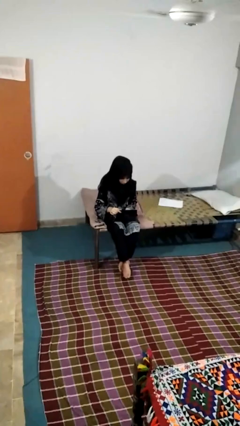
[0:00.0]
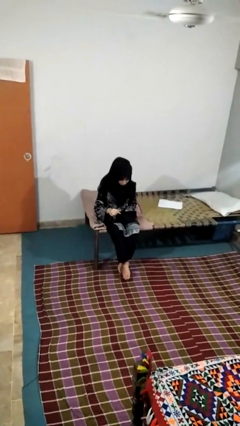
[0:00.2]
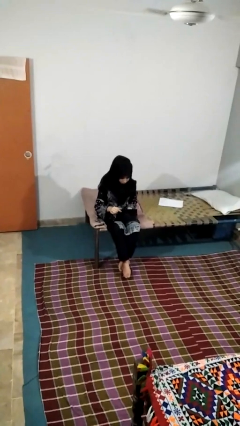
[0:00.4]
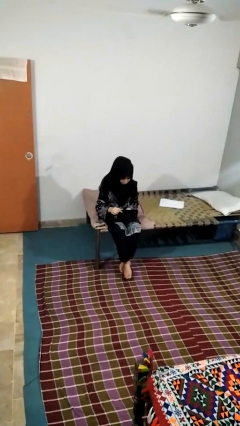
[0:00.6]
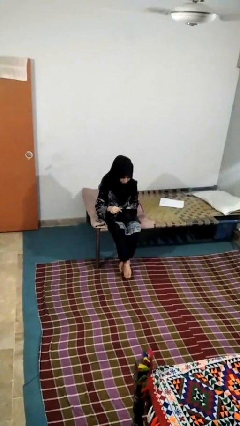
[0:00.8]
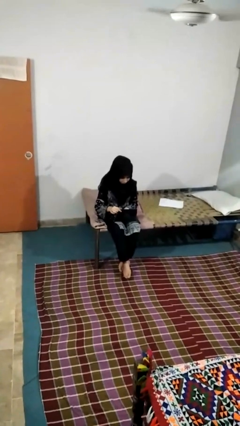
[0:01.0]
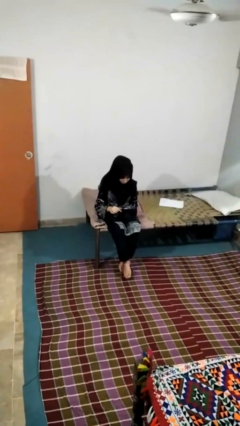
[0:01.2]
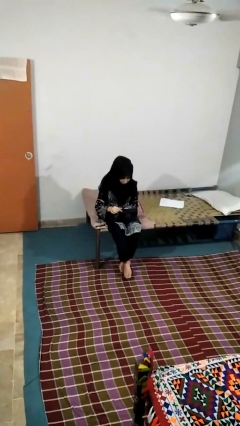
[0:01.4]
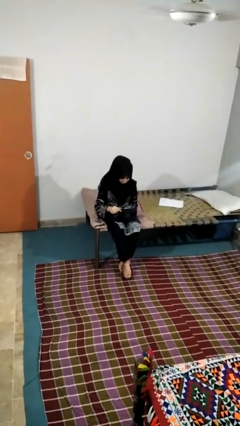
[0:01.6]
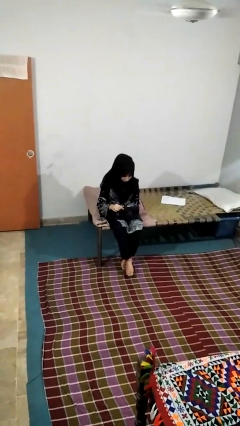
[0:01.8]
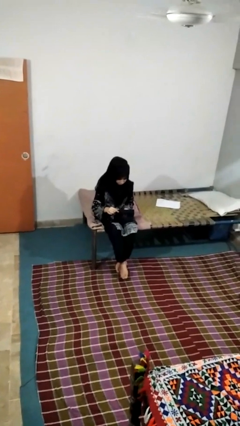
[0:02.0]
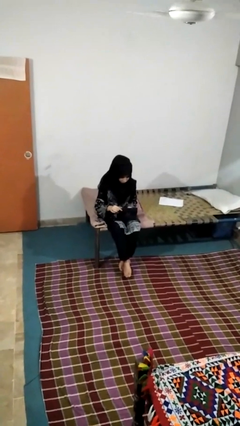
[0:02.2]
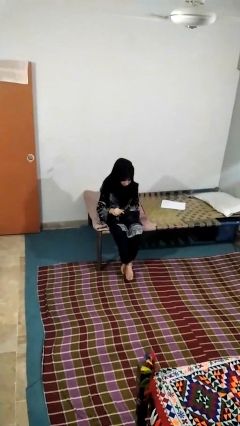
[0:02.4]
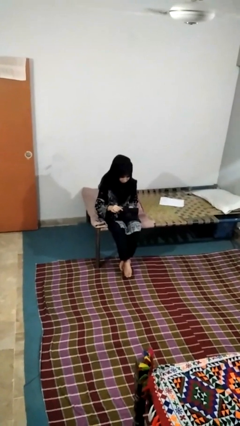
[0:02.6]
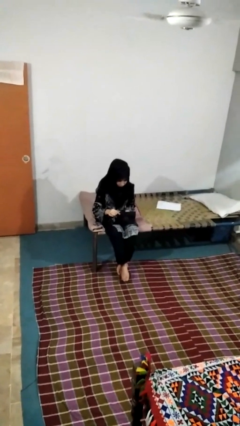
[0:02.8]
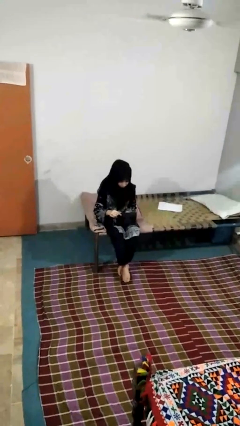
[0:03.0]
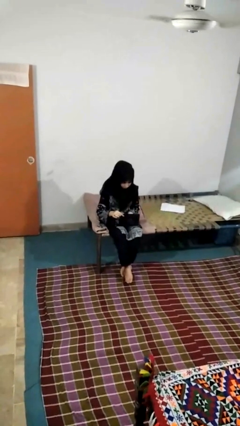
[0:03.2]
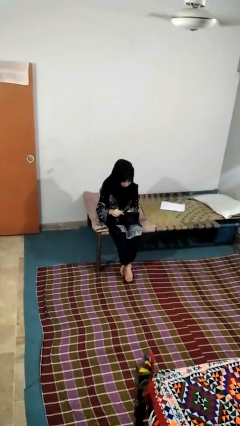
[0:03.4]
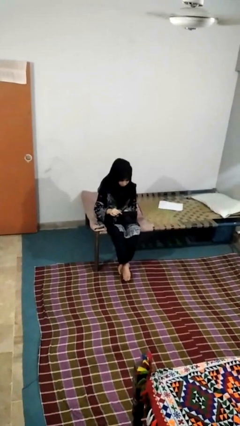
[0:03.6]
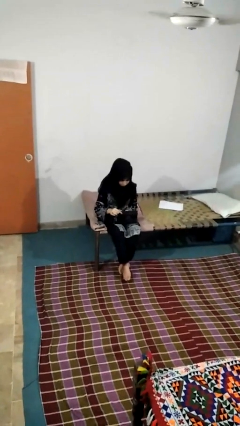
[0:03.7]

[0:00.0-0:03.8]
person searches jewelry box

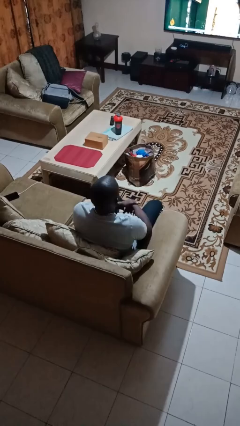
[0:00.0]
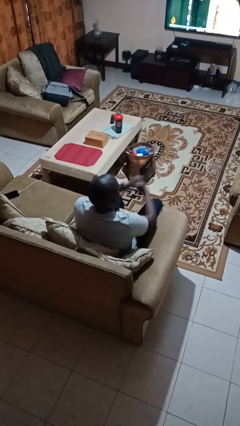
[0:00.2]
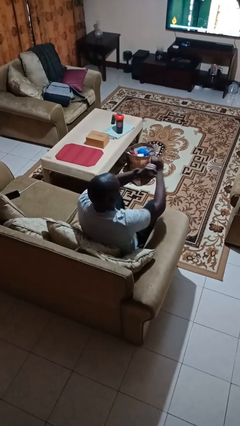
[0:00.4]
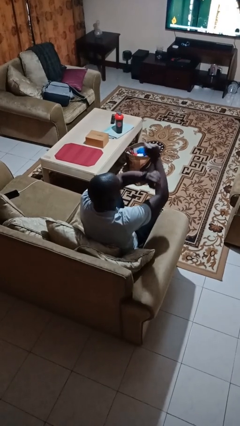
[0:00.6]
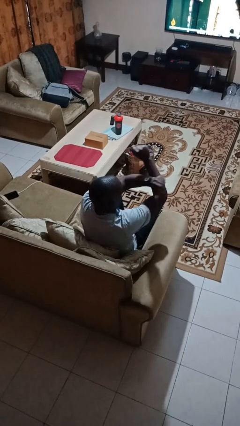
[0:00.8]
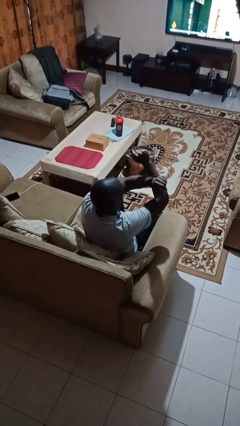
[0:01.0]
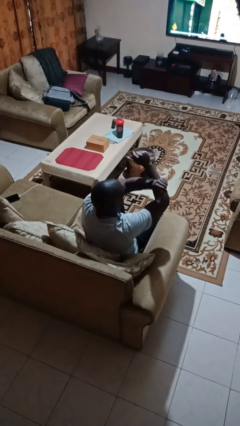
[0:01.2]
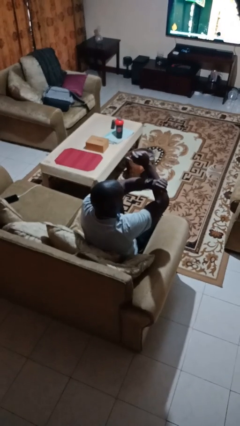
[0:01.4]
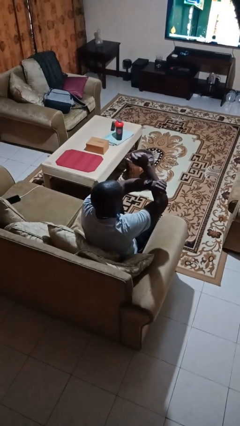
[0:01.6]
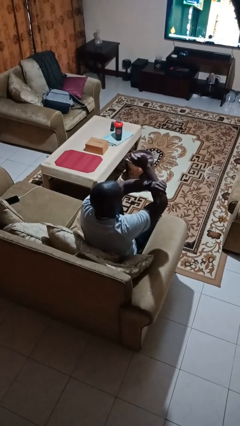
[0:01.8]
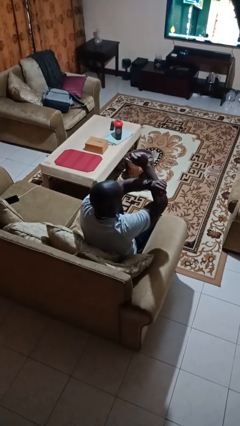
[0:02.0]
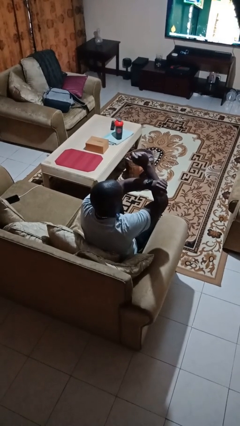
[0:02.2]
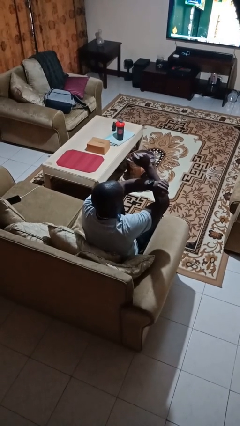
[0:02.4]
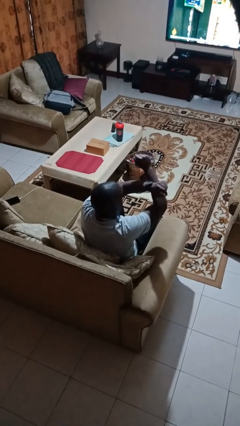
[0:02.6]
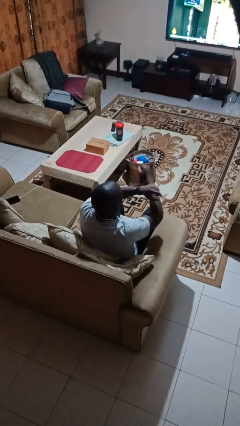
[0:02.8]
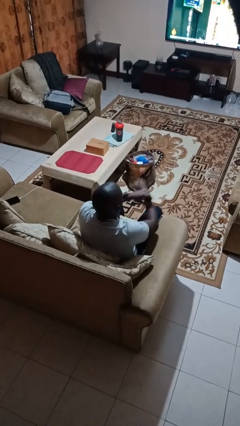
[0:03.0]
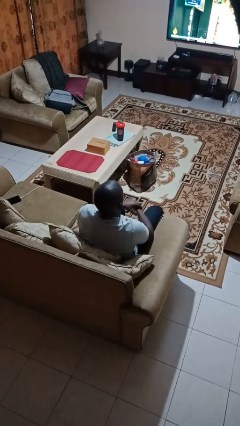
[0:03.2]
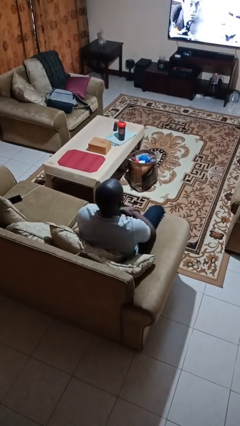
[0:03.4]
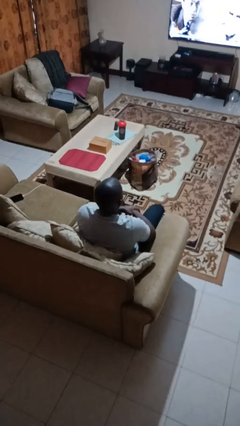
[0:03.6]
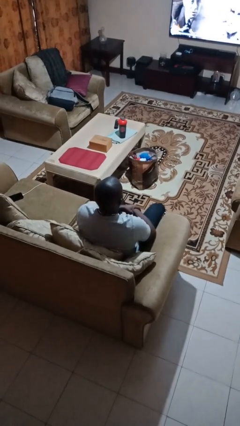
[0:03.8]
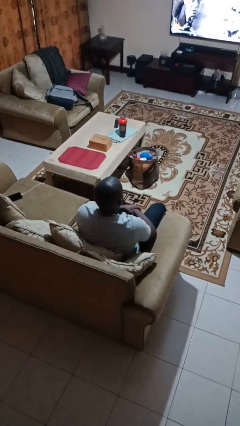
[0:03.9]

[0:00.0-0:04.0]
person gestures arms x

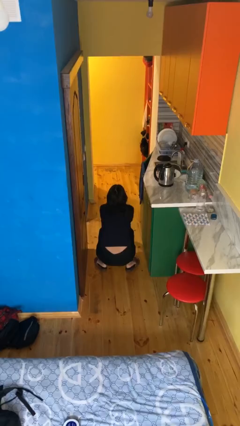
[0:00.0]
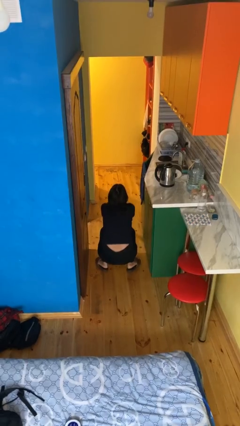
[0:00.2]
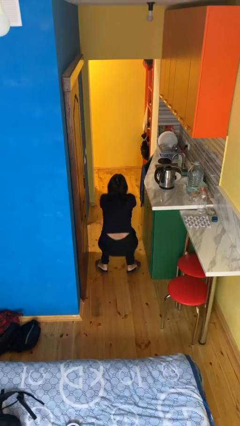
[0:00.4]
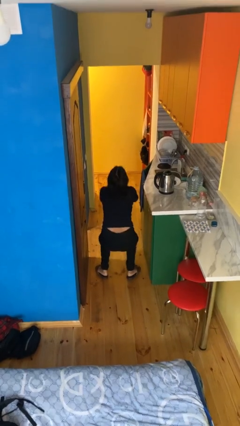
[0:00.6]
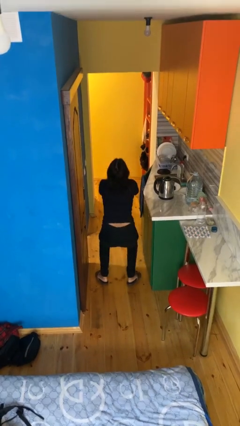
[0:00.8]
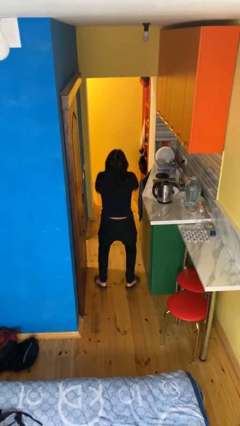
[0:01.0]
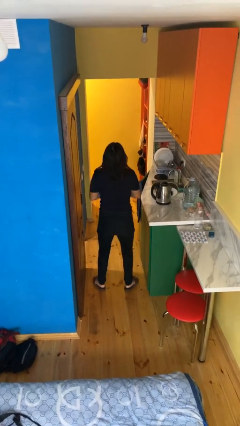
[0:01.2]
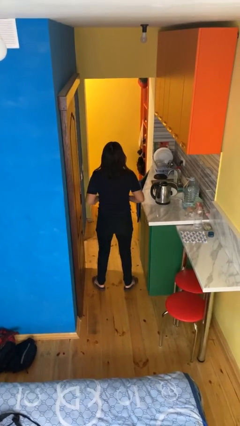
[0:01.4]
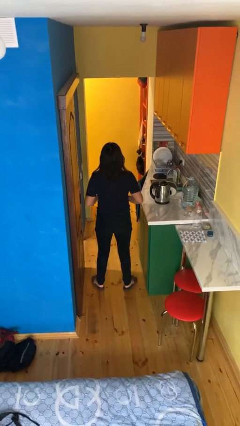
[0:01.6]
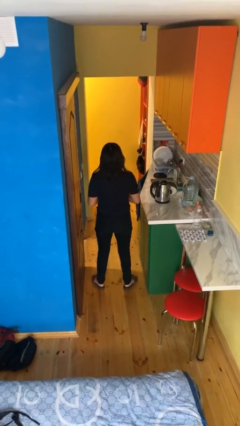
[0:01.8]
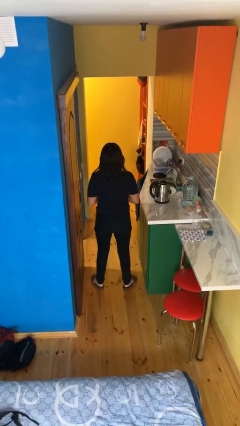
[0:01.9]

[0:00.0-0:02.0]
person stands up

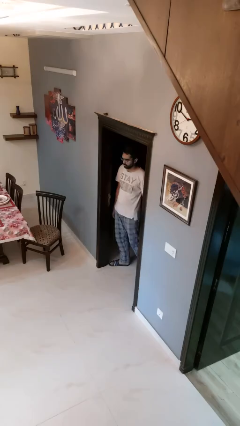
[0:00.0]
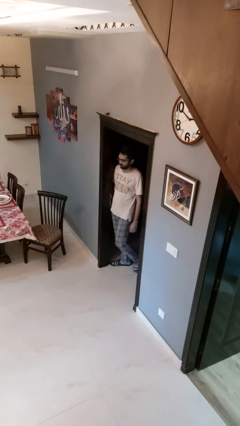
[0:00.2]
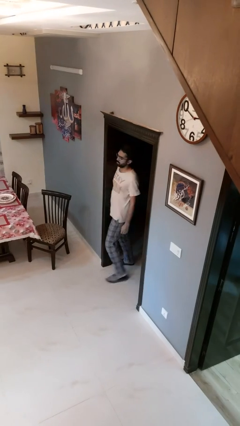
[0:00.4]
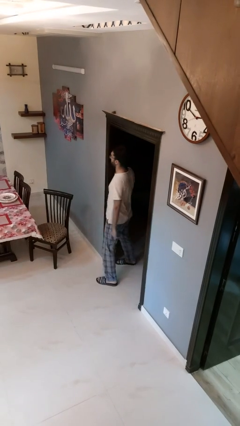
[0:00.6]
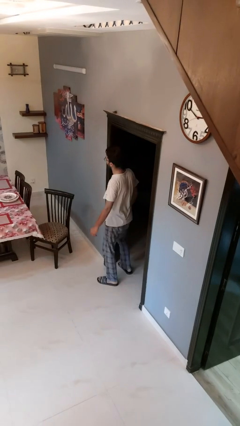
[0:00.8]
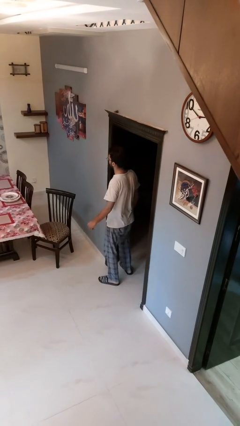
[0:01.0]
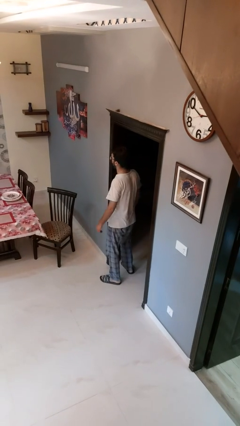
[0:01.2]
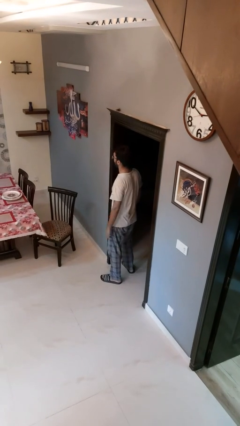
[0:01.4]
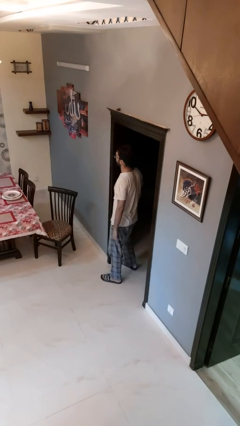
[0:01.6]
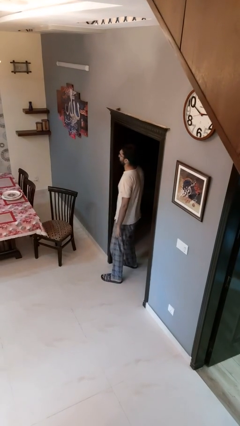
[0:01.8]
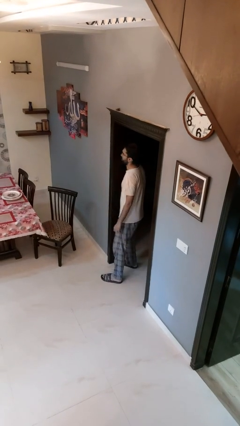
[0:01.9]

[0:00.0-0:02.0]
person bumps into wall

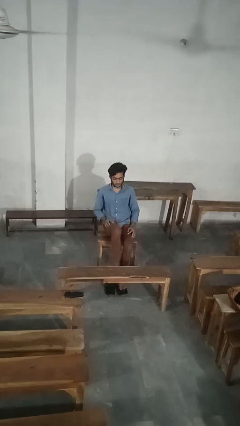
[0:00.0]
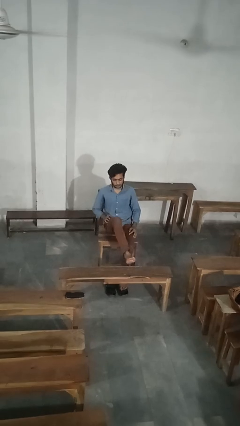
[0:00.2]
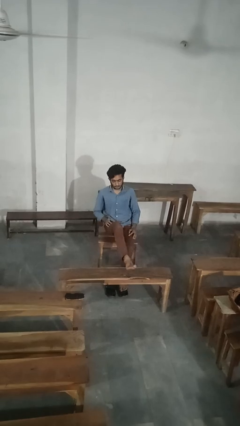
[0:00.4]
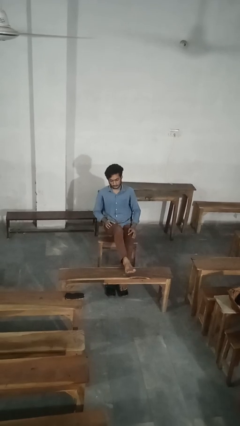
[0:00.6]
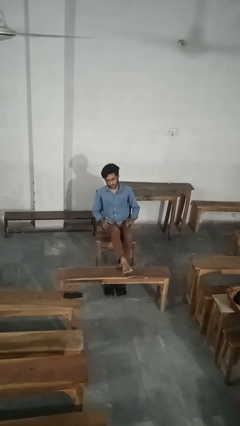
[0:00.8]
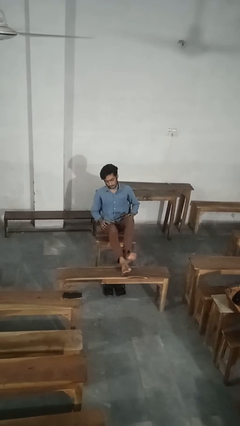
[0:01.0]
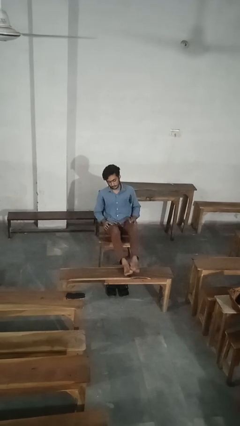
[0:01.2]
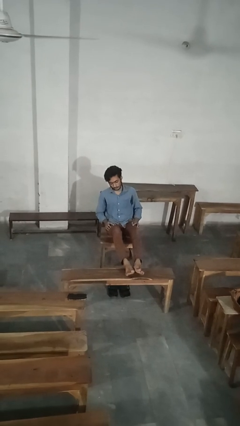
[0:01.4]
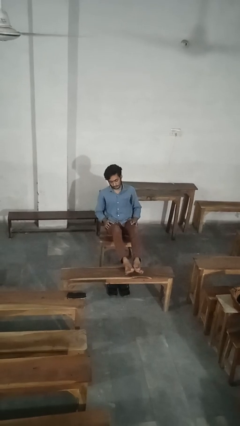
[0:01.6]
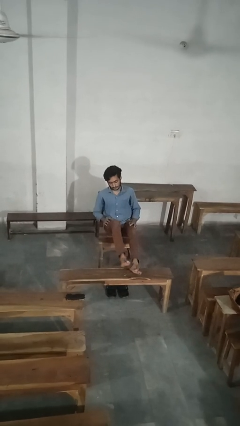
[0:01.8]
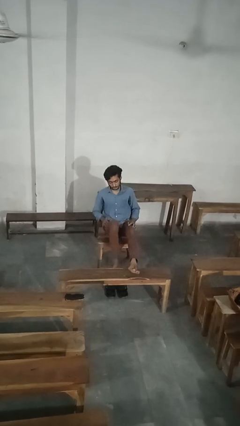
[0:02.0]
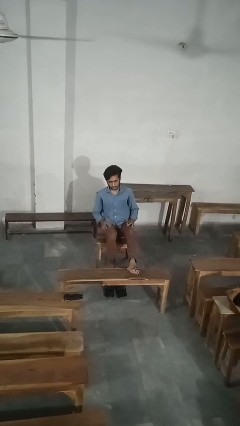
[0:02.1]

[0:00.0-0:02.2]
person puts feet up

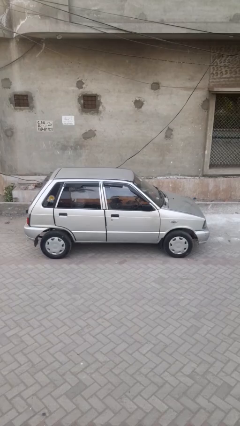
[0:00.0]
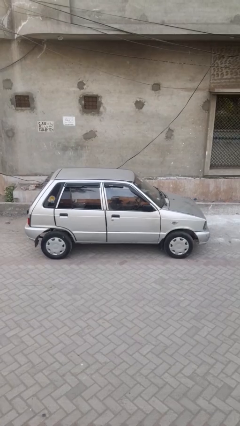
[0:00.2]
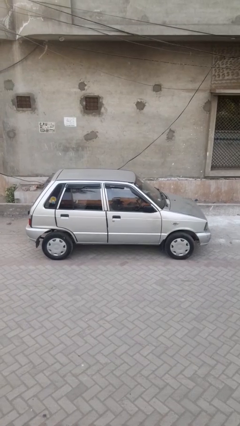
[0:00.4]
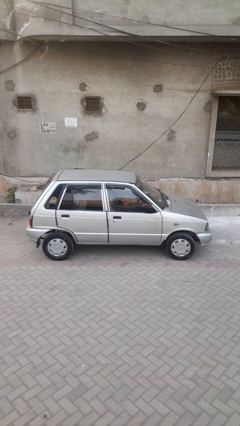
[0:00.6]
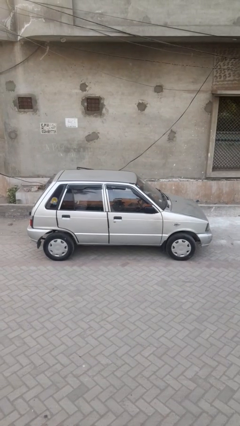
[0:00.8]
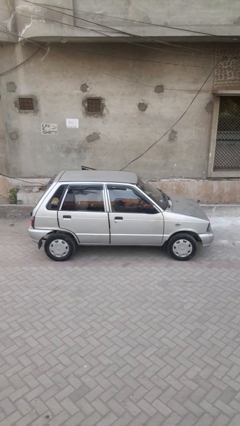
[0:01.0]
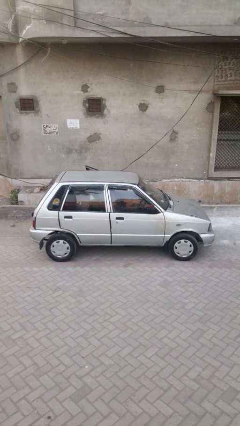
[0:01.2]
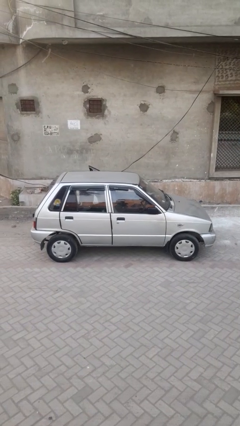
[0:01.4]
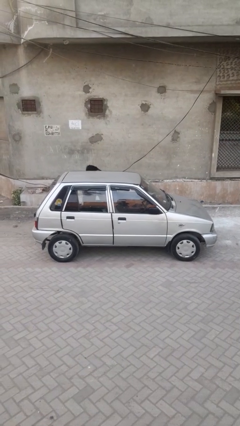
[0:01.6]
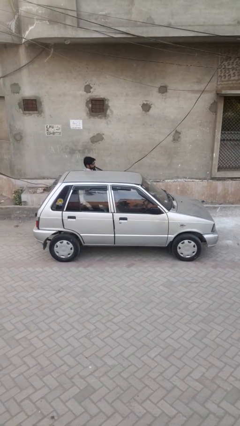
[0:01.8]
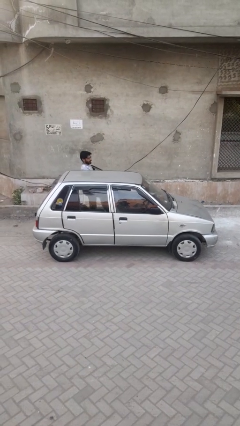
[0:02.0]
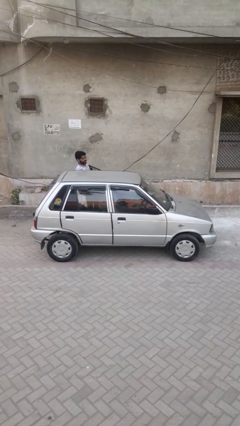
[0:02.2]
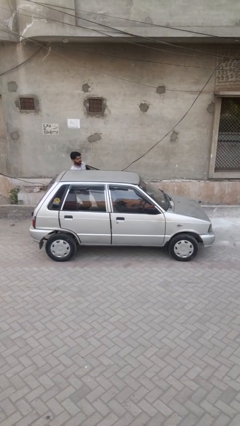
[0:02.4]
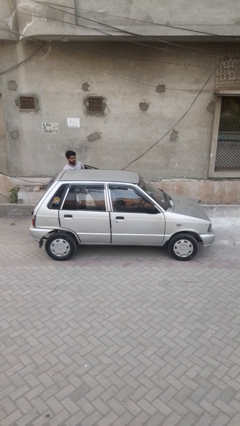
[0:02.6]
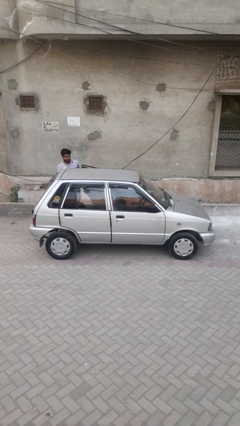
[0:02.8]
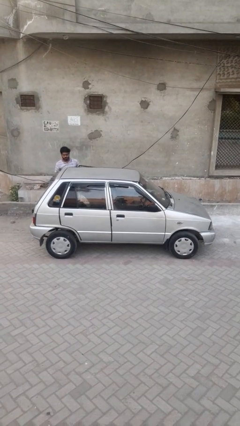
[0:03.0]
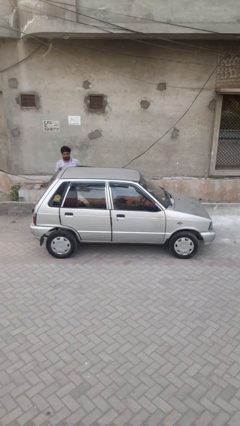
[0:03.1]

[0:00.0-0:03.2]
car drops off person

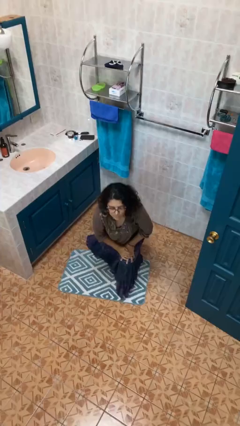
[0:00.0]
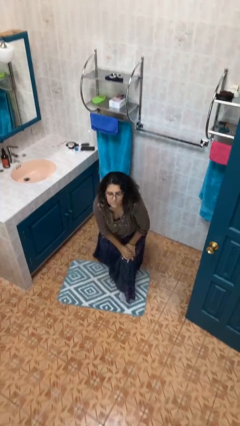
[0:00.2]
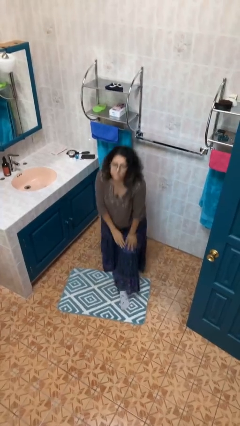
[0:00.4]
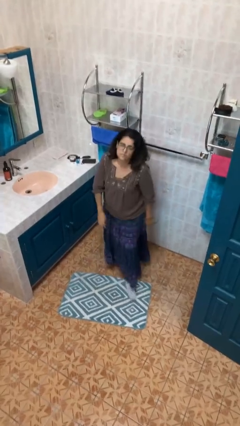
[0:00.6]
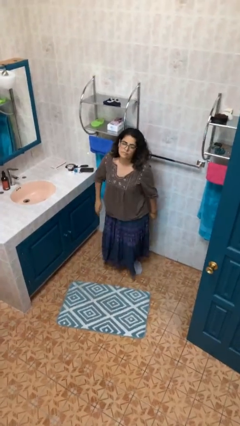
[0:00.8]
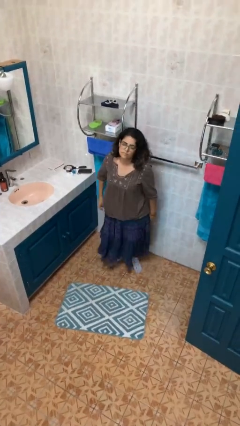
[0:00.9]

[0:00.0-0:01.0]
person stands up from floor
